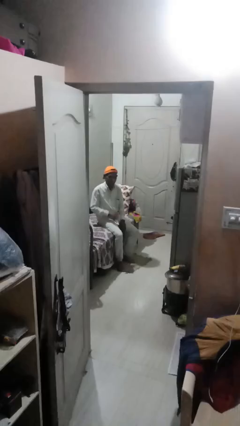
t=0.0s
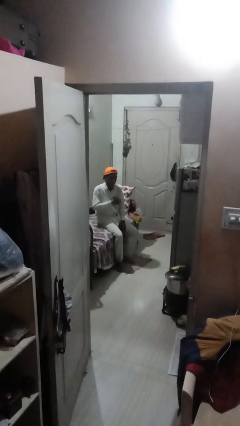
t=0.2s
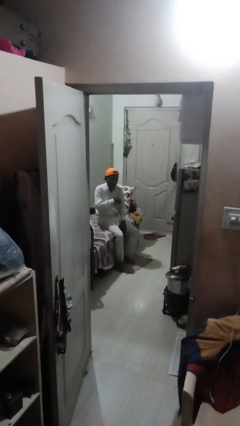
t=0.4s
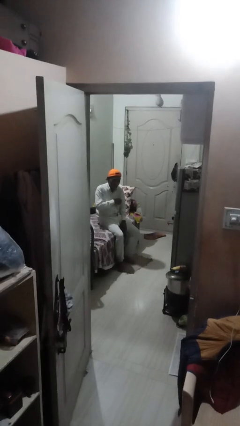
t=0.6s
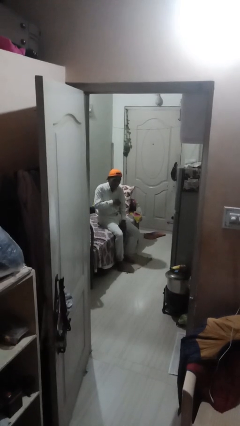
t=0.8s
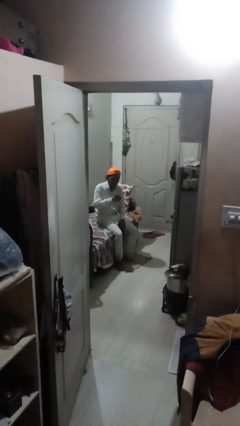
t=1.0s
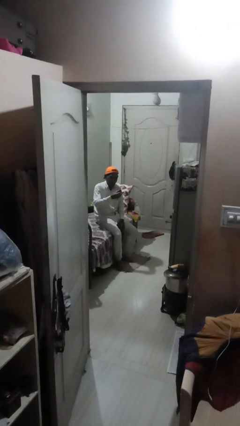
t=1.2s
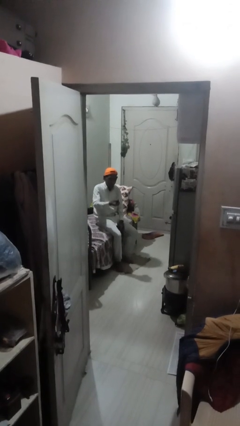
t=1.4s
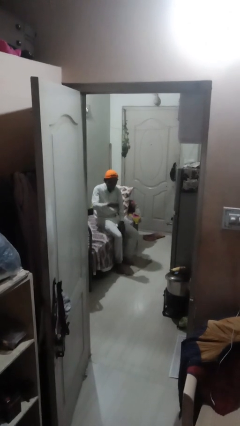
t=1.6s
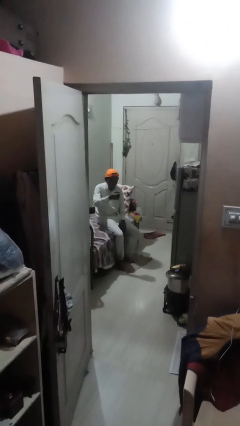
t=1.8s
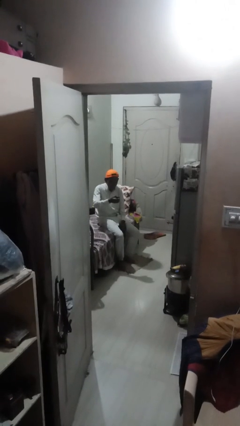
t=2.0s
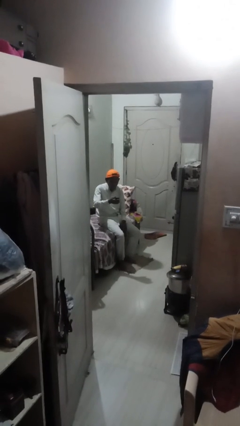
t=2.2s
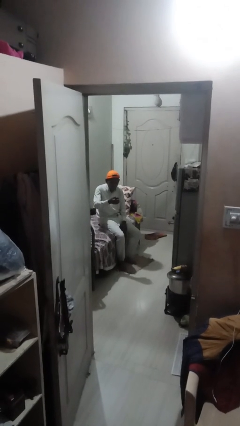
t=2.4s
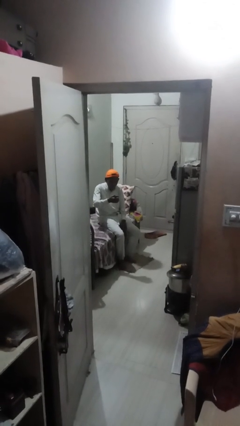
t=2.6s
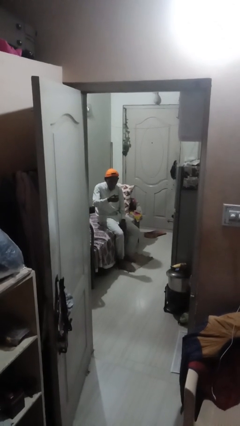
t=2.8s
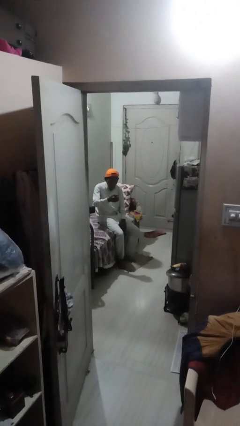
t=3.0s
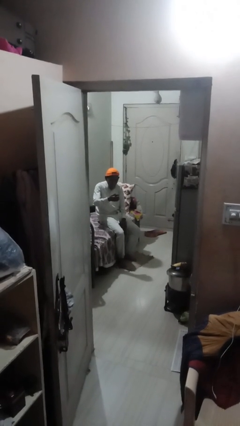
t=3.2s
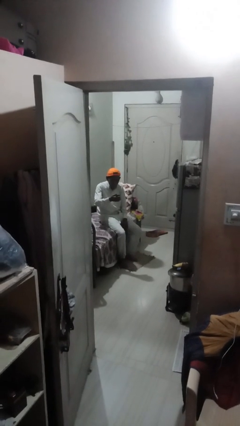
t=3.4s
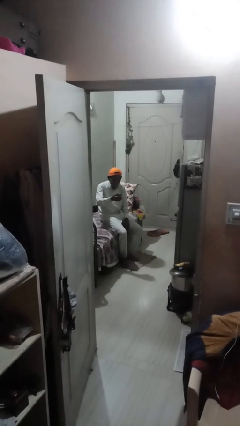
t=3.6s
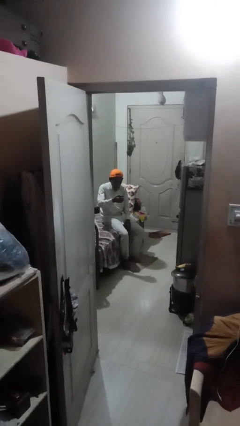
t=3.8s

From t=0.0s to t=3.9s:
person takes phone from pocket

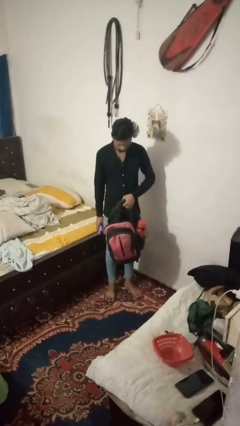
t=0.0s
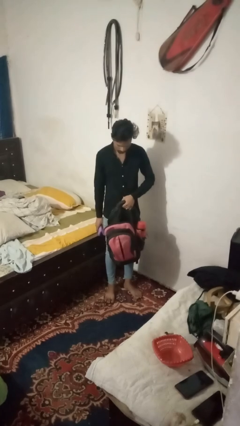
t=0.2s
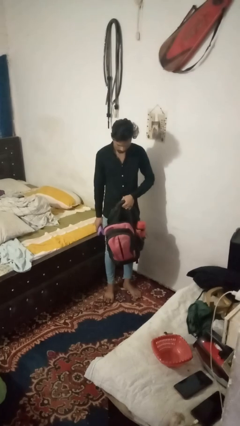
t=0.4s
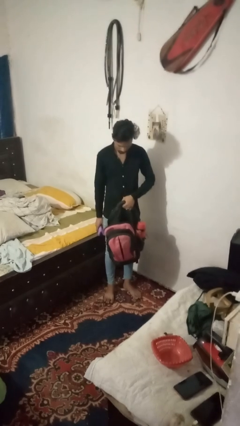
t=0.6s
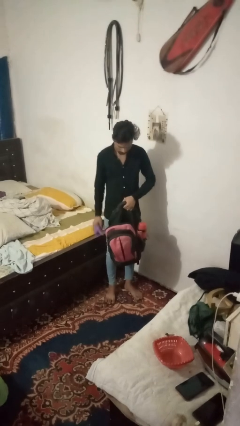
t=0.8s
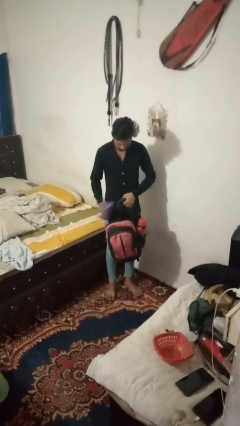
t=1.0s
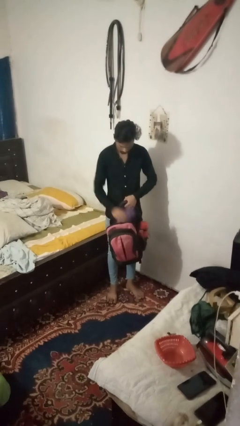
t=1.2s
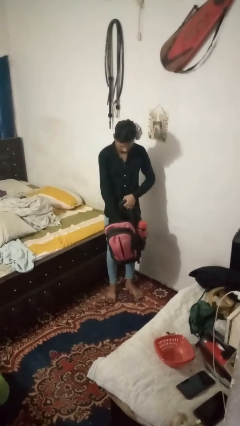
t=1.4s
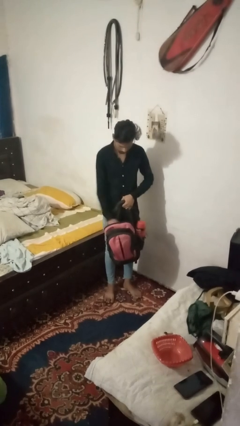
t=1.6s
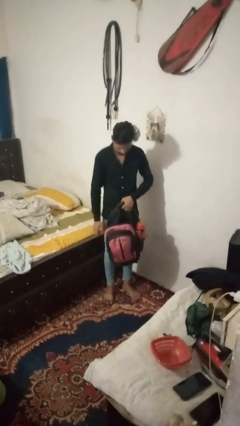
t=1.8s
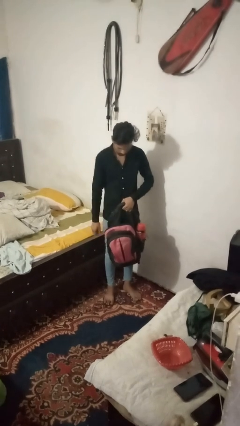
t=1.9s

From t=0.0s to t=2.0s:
person puts object into bag

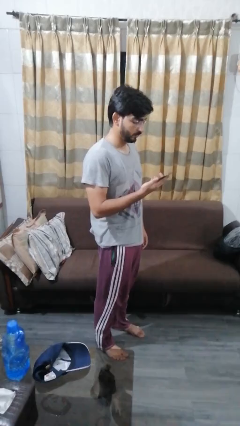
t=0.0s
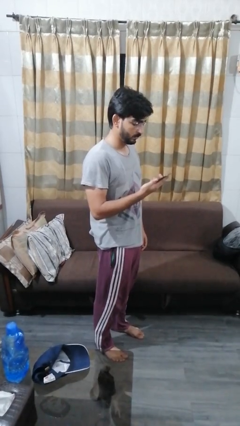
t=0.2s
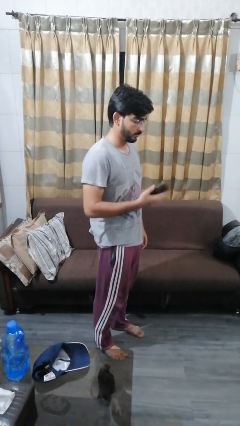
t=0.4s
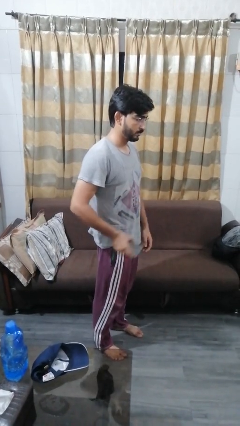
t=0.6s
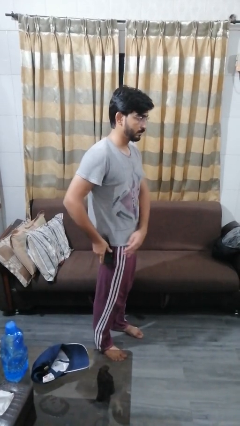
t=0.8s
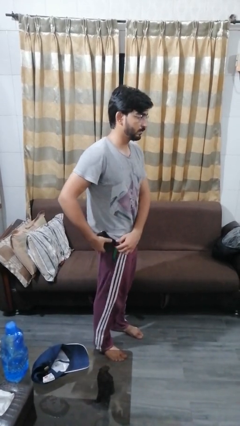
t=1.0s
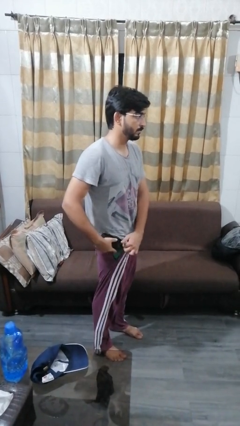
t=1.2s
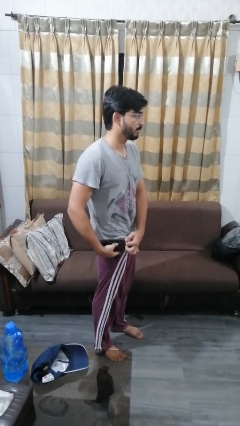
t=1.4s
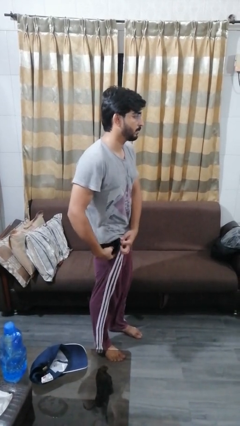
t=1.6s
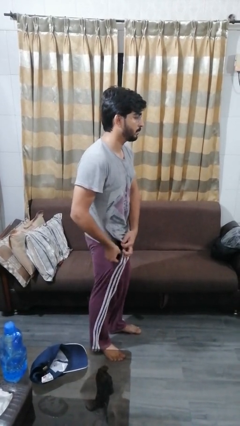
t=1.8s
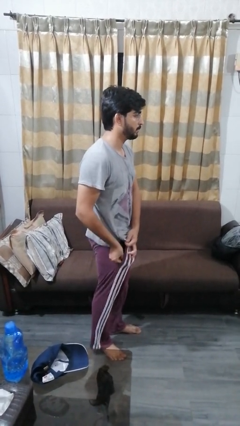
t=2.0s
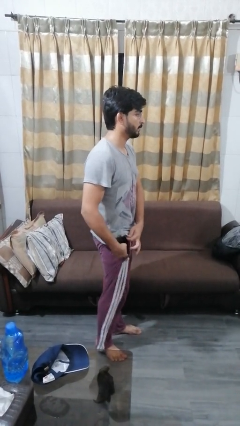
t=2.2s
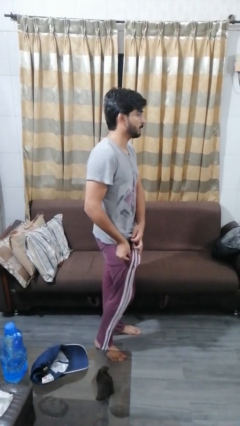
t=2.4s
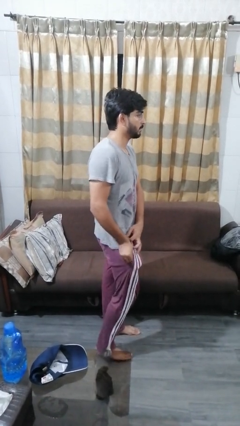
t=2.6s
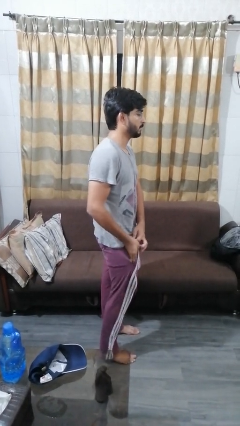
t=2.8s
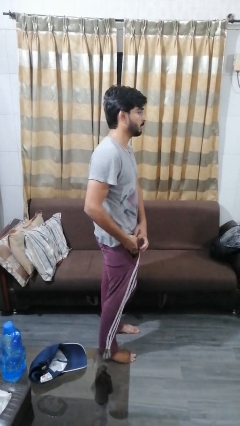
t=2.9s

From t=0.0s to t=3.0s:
person puts phone into pocket

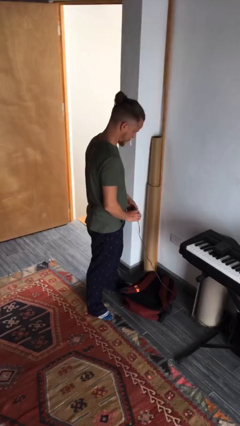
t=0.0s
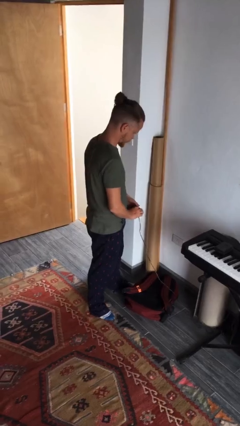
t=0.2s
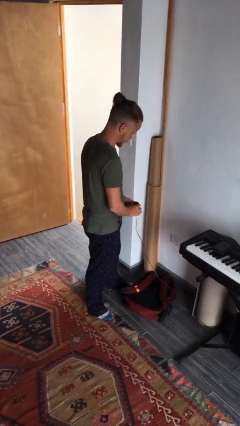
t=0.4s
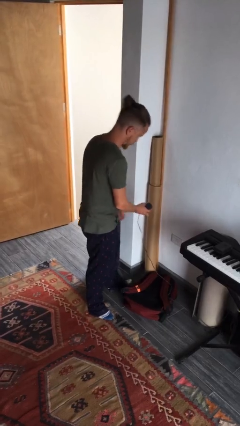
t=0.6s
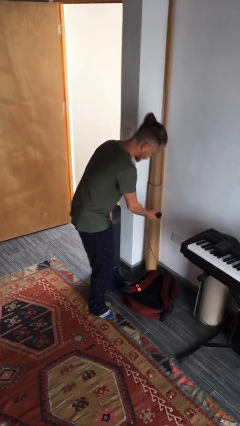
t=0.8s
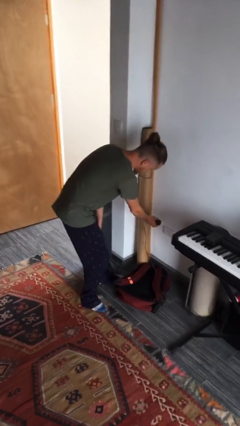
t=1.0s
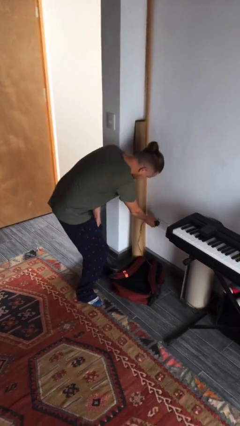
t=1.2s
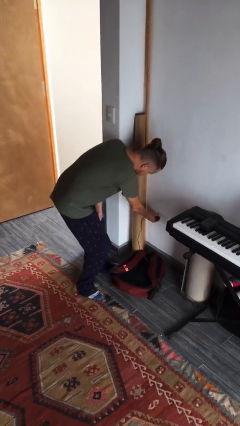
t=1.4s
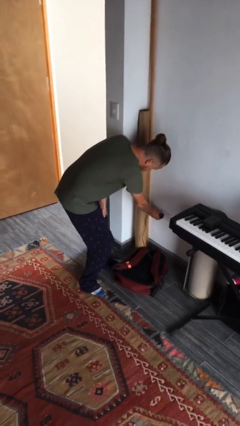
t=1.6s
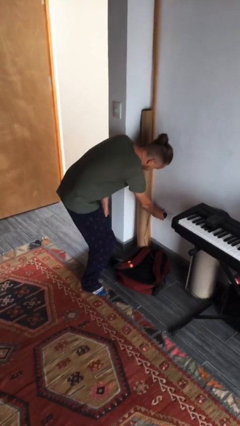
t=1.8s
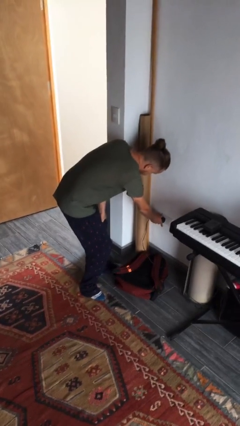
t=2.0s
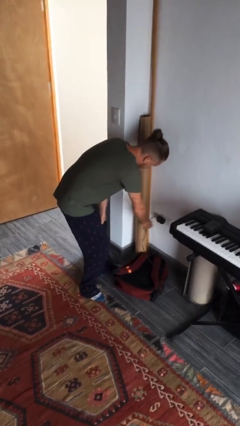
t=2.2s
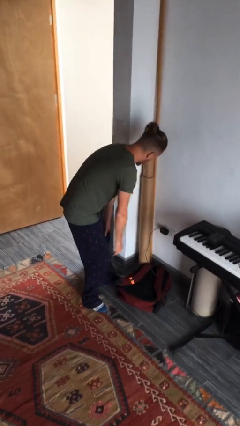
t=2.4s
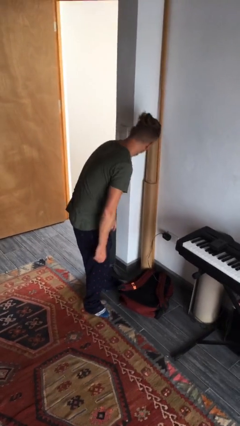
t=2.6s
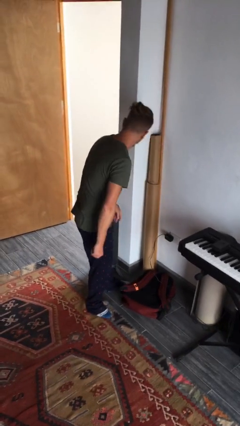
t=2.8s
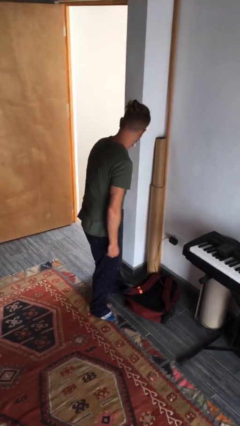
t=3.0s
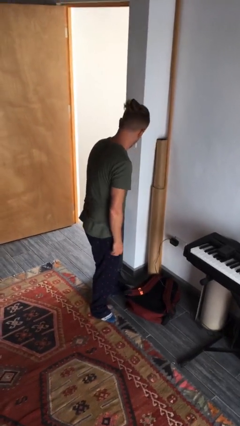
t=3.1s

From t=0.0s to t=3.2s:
person plugs into electrical socket

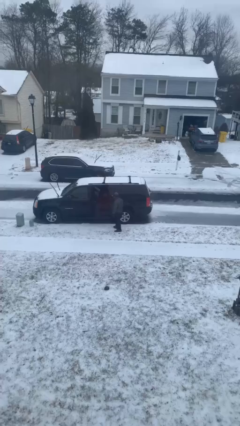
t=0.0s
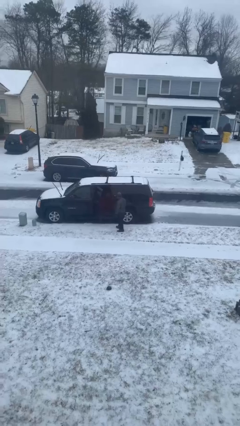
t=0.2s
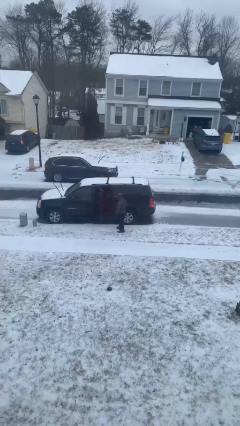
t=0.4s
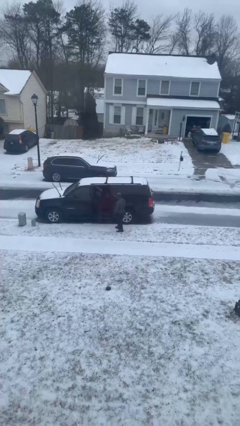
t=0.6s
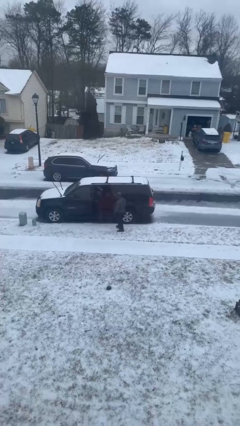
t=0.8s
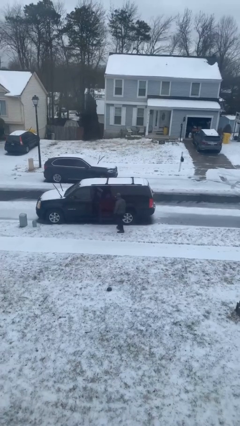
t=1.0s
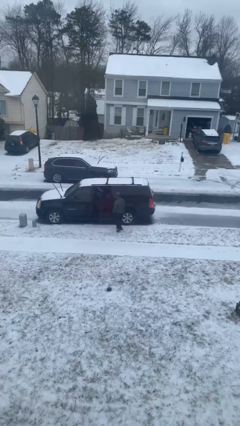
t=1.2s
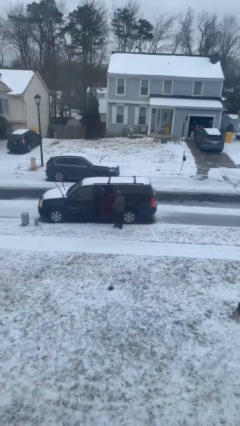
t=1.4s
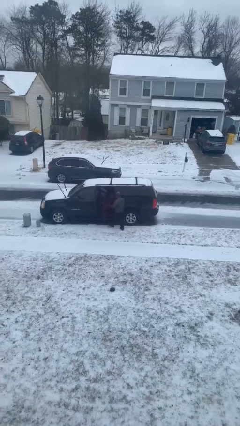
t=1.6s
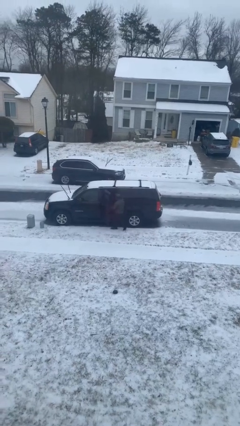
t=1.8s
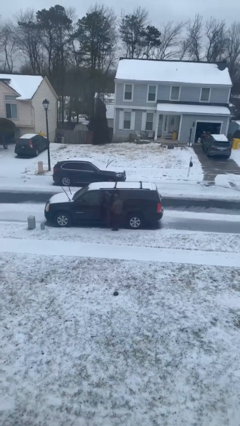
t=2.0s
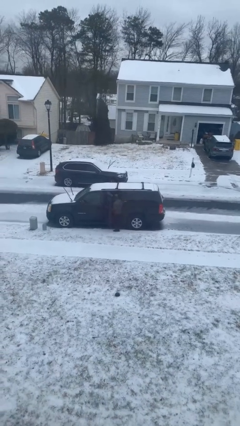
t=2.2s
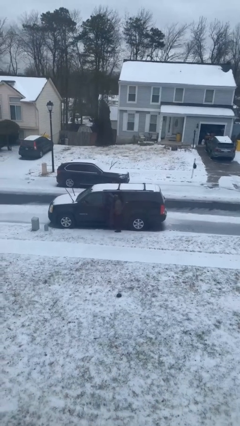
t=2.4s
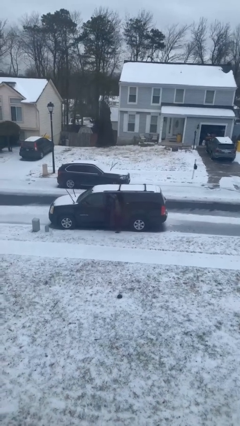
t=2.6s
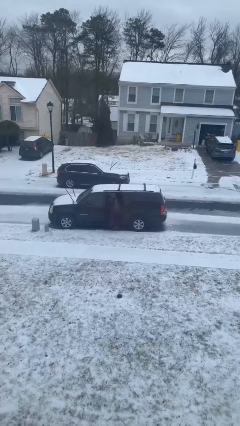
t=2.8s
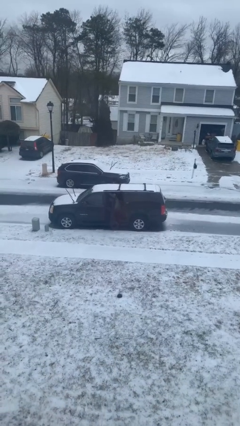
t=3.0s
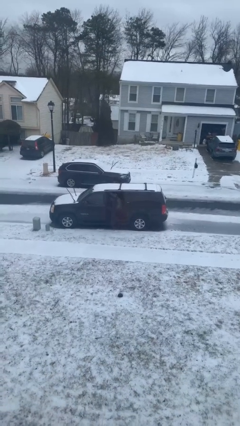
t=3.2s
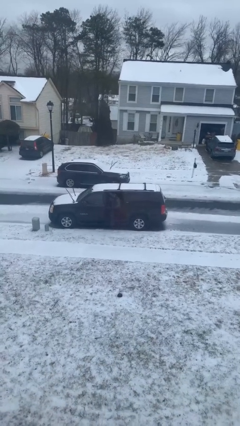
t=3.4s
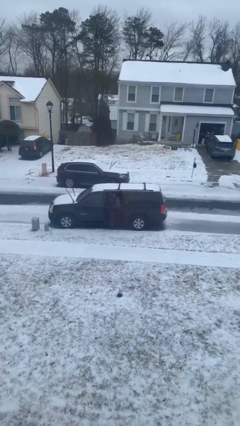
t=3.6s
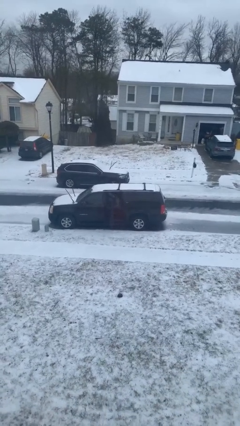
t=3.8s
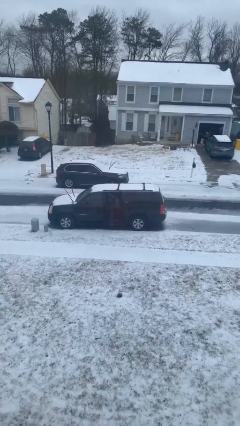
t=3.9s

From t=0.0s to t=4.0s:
person enters car

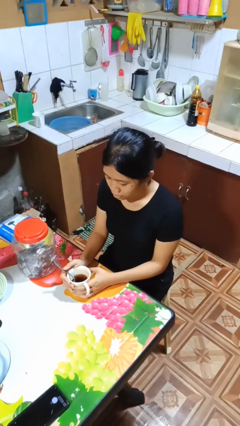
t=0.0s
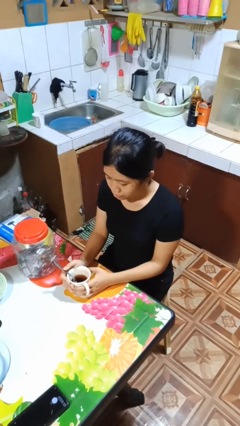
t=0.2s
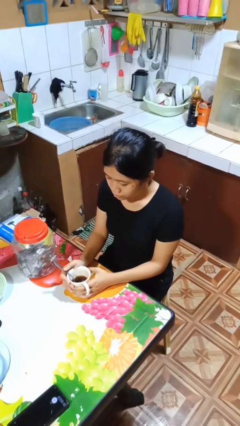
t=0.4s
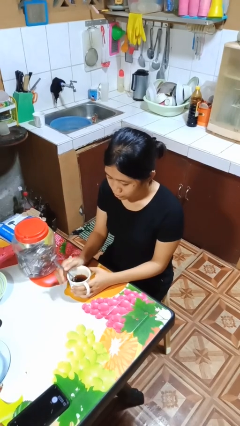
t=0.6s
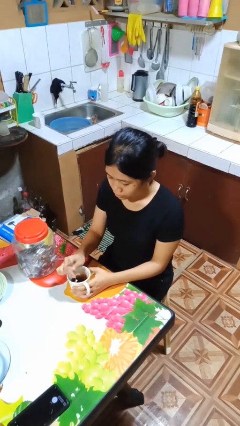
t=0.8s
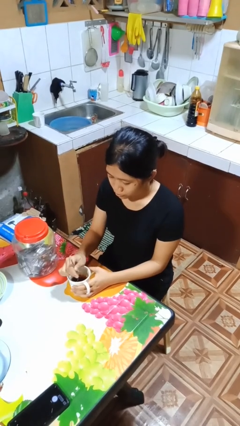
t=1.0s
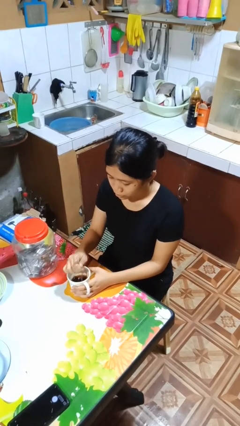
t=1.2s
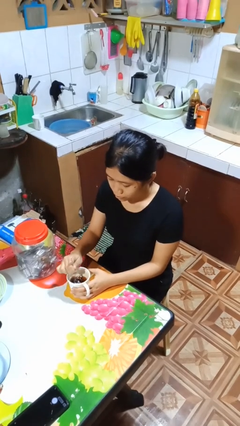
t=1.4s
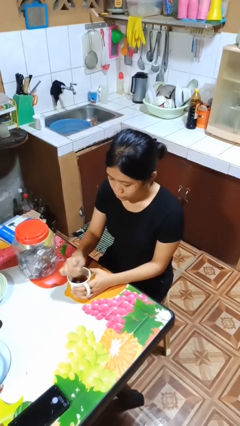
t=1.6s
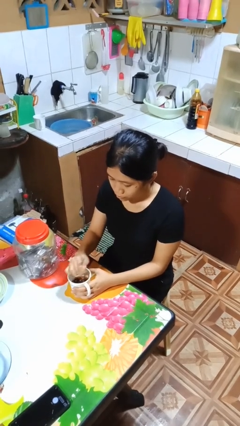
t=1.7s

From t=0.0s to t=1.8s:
person stirs mug
